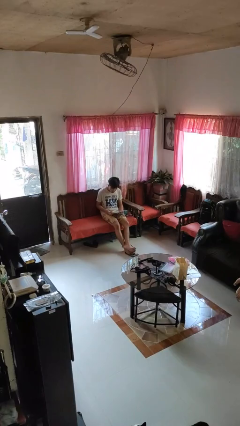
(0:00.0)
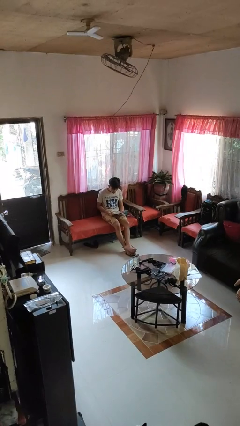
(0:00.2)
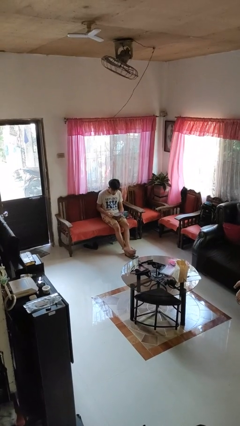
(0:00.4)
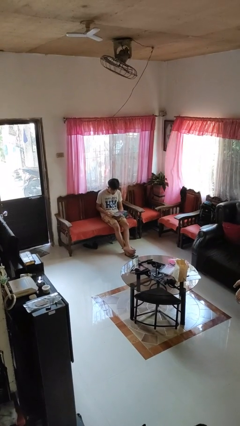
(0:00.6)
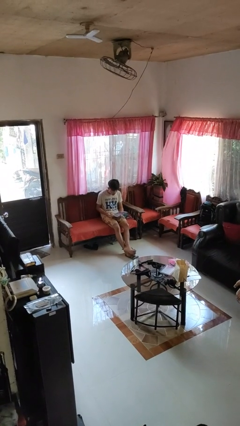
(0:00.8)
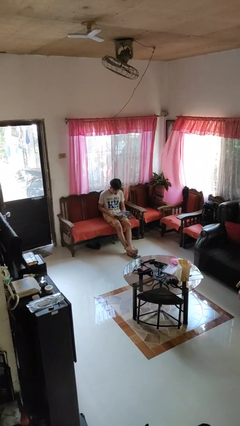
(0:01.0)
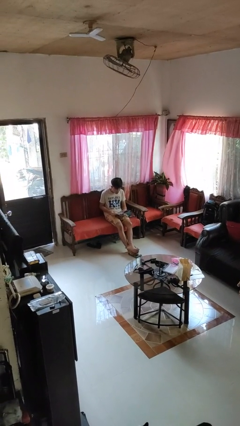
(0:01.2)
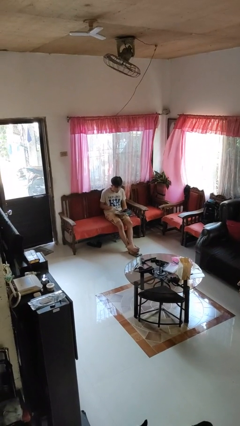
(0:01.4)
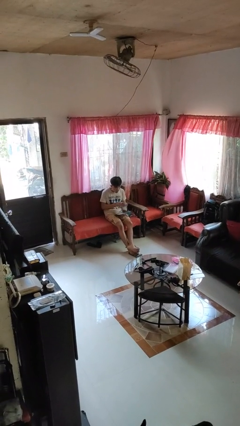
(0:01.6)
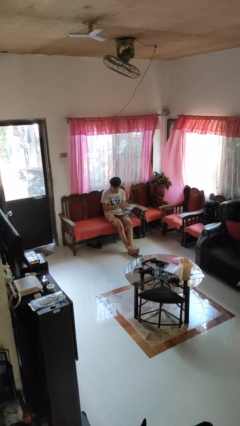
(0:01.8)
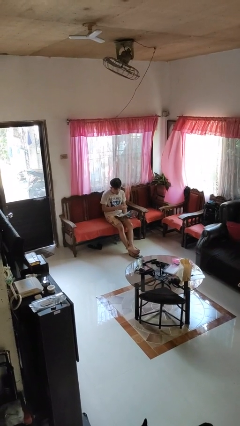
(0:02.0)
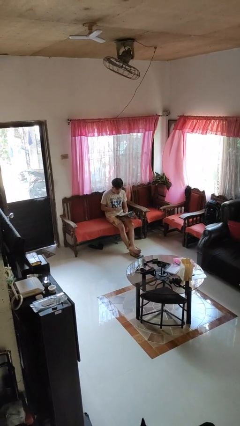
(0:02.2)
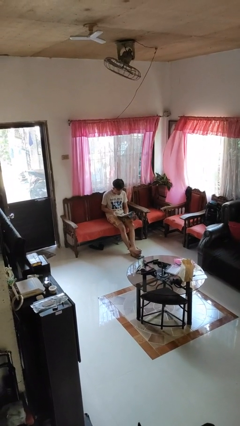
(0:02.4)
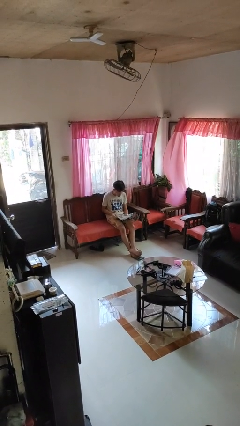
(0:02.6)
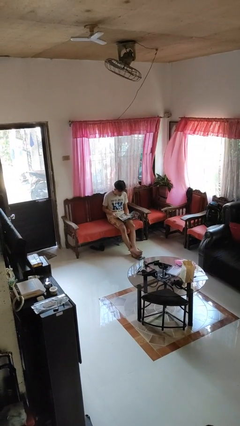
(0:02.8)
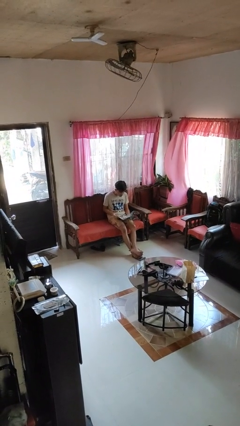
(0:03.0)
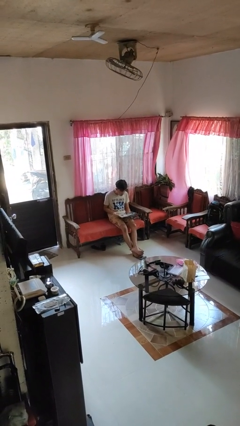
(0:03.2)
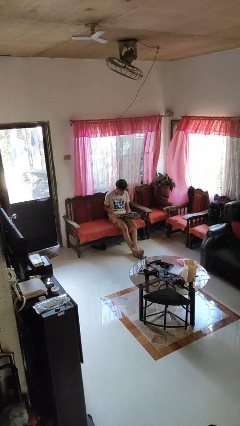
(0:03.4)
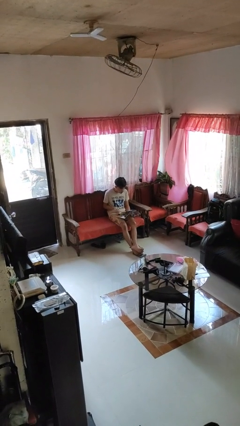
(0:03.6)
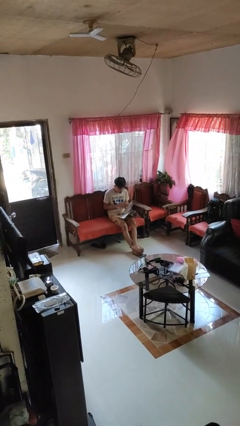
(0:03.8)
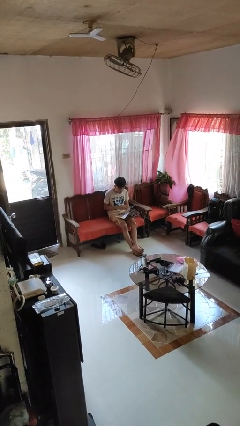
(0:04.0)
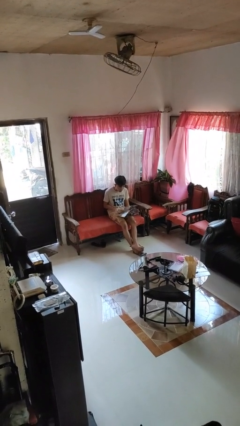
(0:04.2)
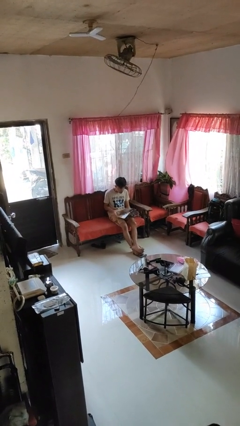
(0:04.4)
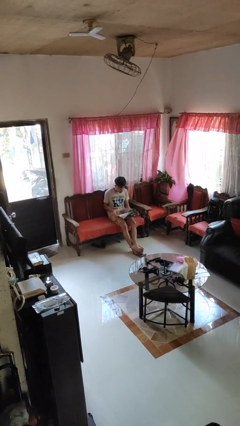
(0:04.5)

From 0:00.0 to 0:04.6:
person reads magazine

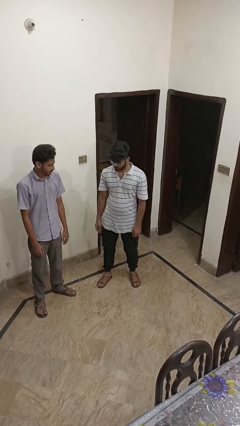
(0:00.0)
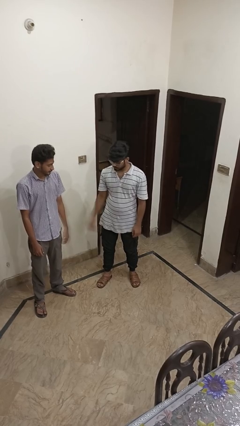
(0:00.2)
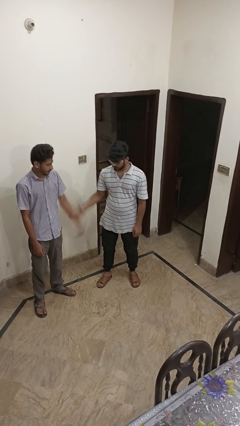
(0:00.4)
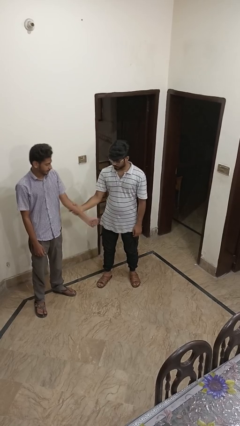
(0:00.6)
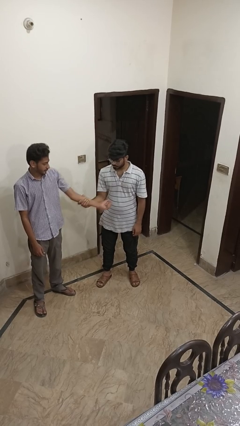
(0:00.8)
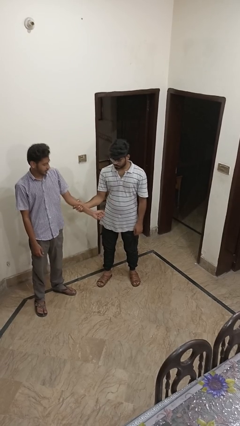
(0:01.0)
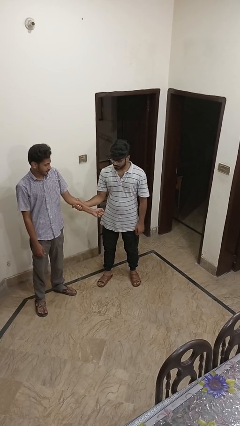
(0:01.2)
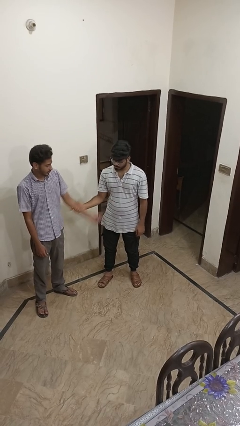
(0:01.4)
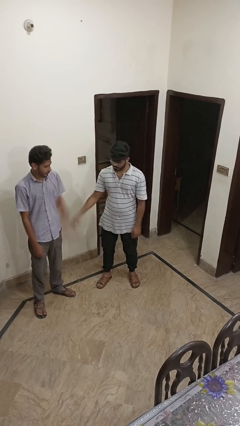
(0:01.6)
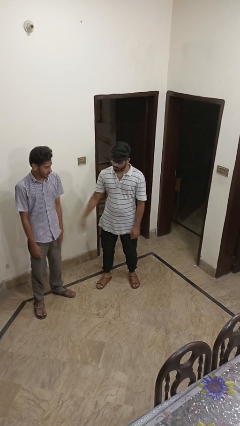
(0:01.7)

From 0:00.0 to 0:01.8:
person grabs person by forearm

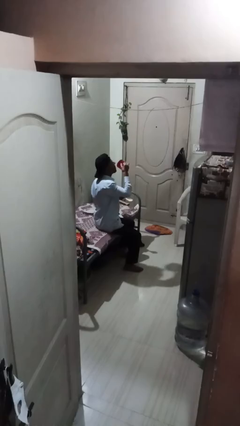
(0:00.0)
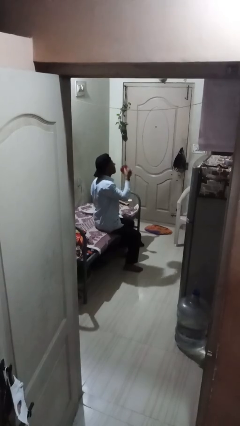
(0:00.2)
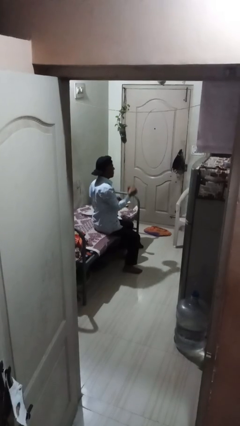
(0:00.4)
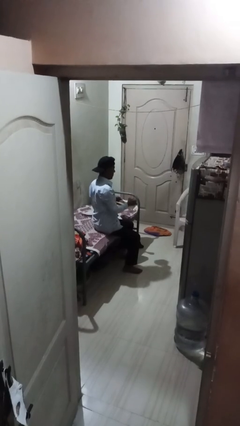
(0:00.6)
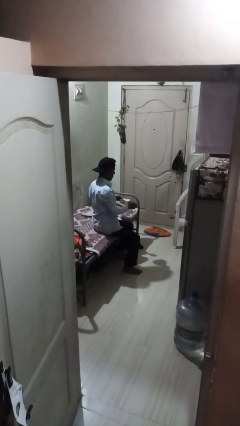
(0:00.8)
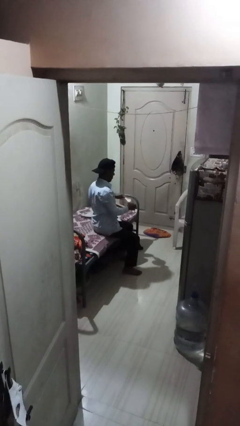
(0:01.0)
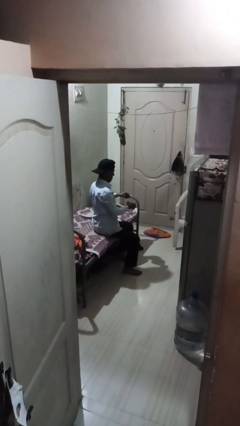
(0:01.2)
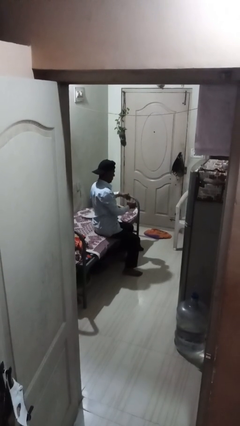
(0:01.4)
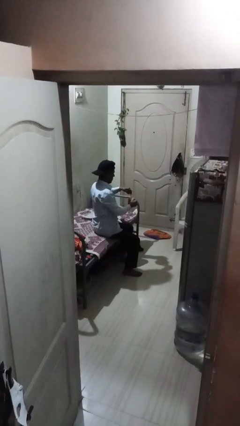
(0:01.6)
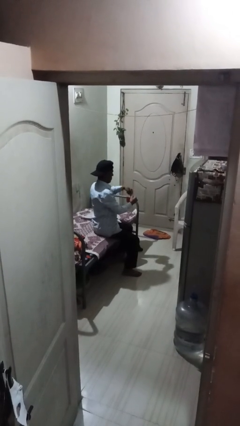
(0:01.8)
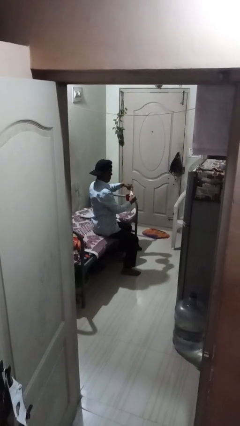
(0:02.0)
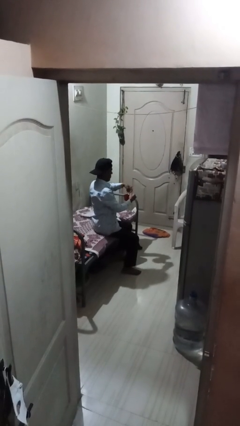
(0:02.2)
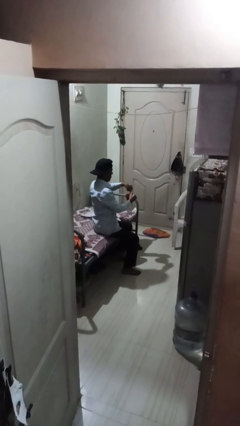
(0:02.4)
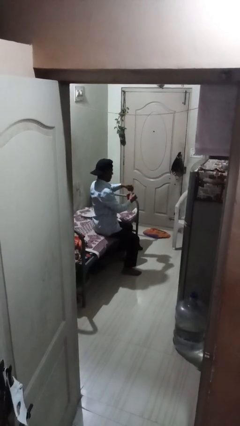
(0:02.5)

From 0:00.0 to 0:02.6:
person stirs mug

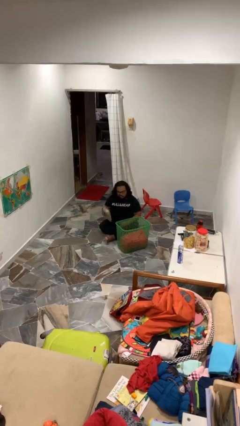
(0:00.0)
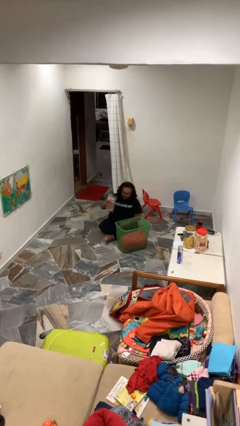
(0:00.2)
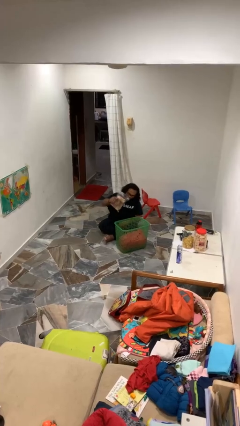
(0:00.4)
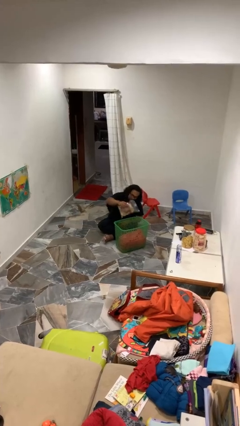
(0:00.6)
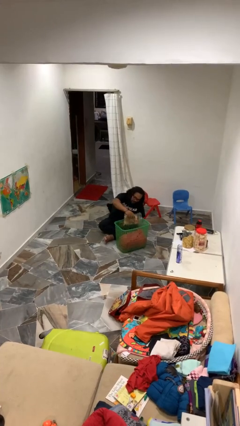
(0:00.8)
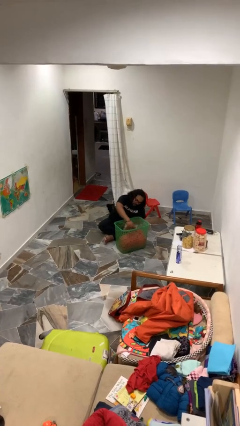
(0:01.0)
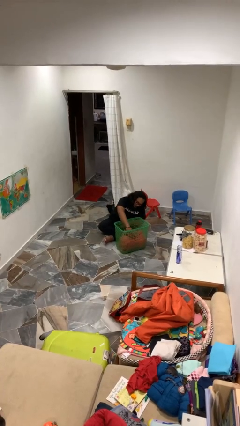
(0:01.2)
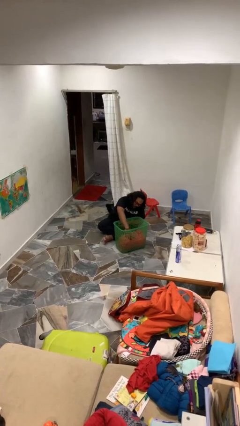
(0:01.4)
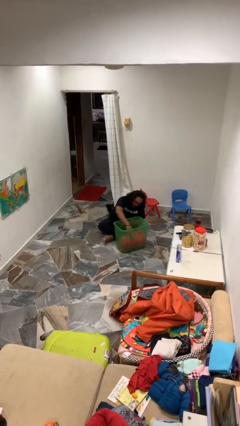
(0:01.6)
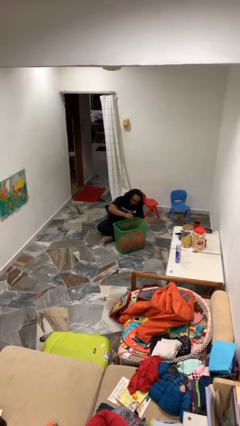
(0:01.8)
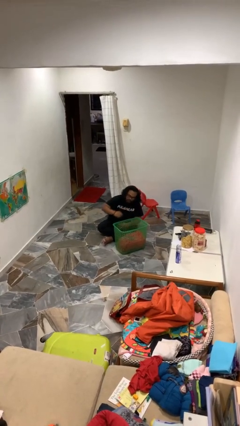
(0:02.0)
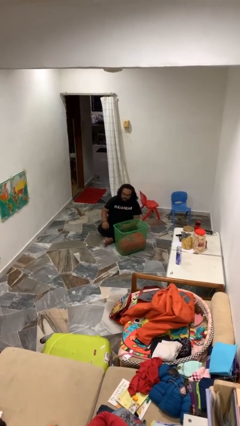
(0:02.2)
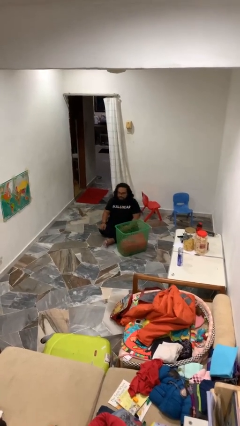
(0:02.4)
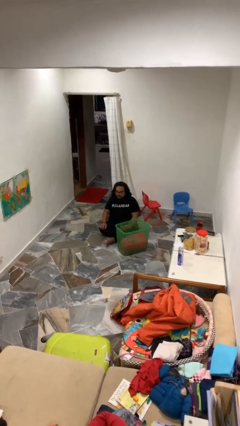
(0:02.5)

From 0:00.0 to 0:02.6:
person puts object into basket

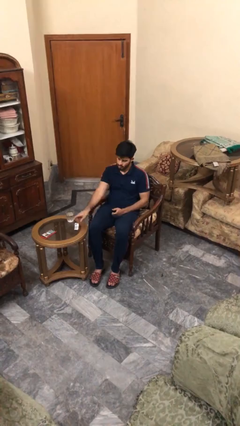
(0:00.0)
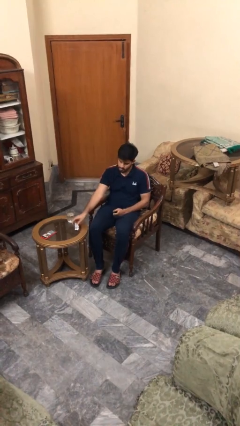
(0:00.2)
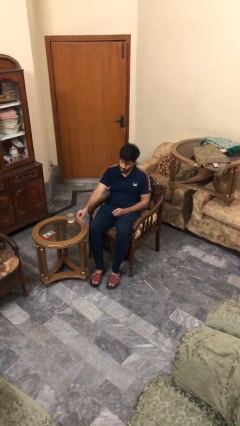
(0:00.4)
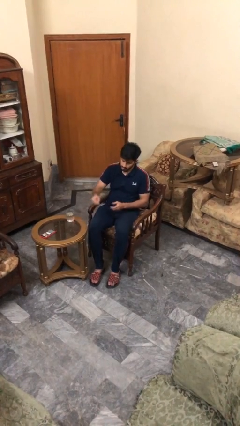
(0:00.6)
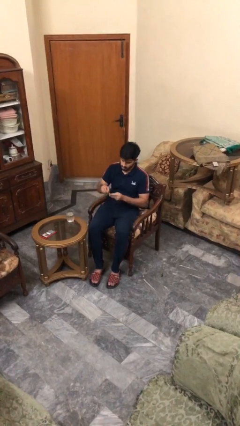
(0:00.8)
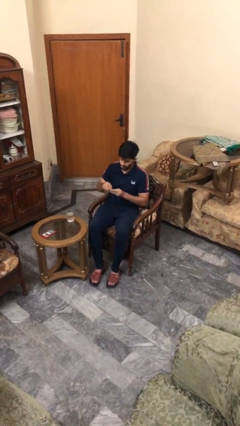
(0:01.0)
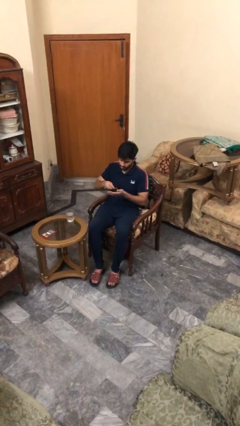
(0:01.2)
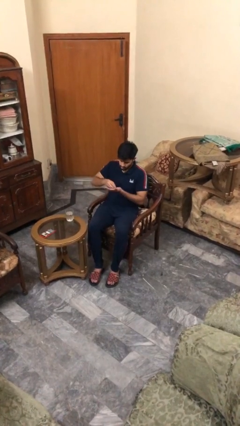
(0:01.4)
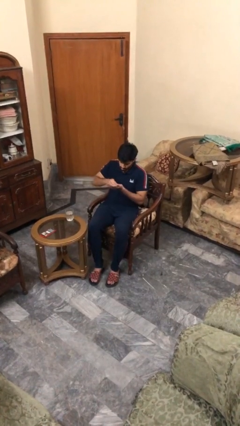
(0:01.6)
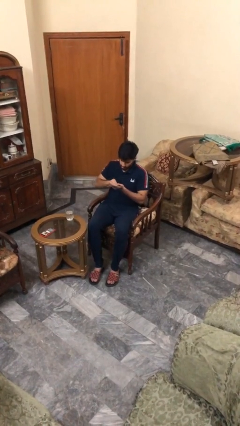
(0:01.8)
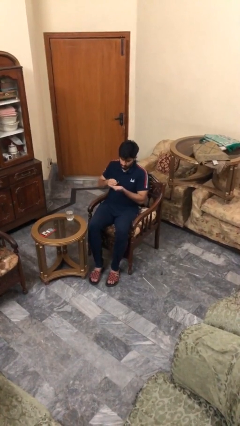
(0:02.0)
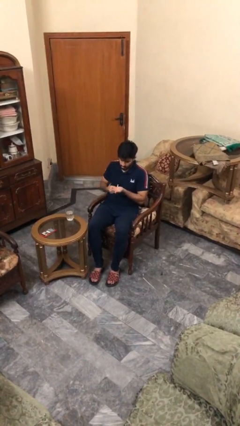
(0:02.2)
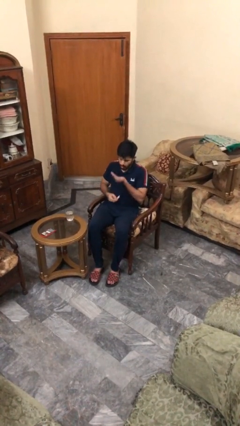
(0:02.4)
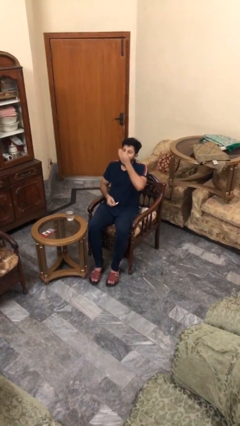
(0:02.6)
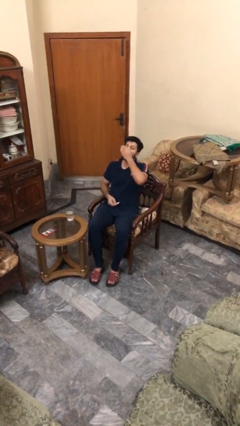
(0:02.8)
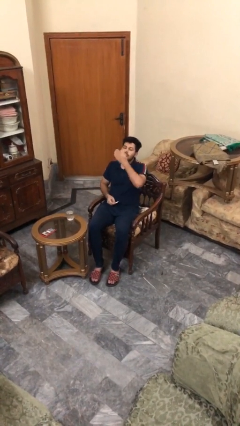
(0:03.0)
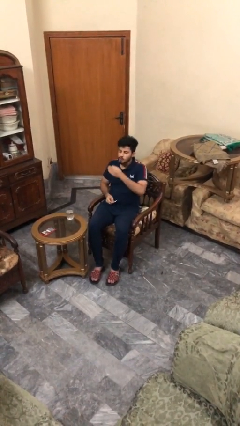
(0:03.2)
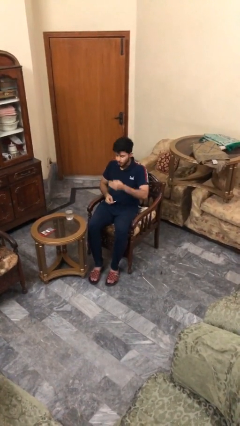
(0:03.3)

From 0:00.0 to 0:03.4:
person takes medicine pills

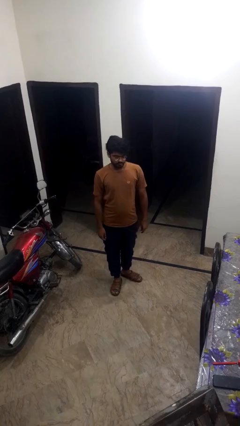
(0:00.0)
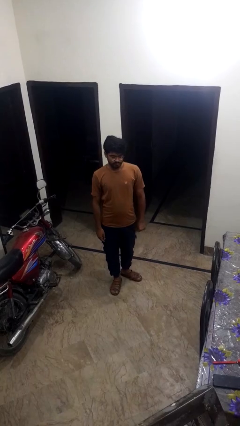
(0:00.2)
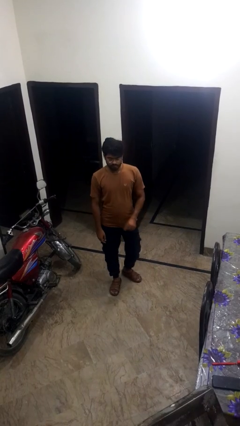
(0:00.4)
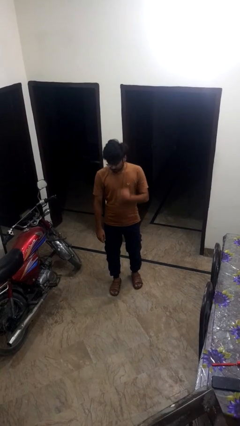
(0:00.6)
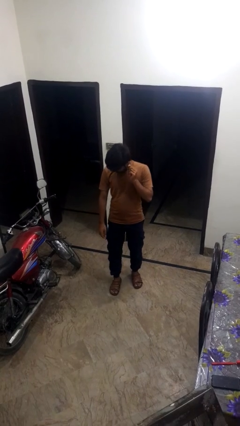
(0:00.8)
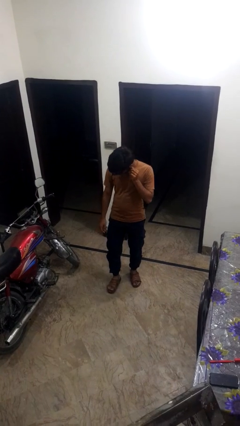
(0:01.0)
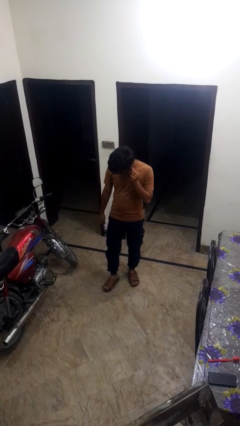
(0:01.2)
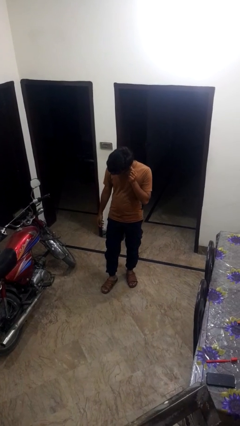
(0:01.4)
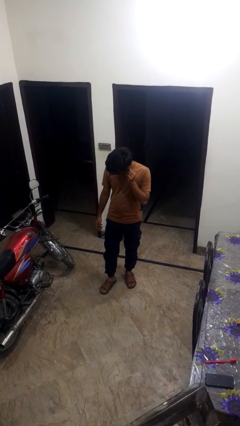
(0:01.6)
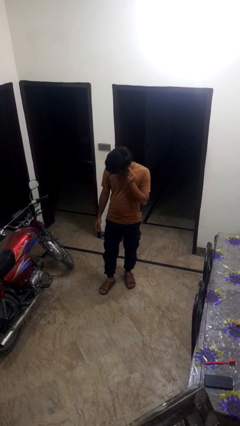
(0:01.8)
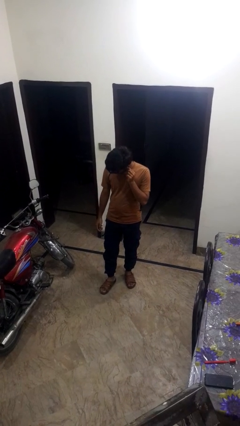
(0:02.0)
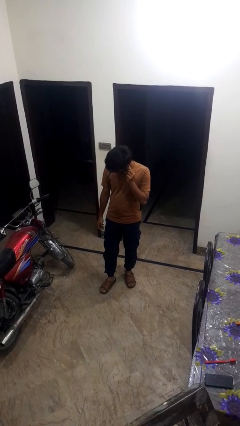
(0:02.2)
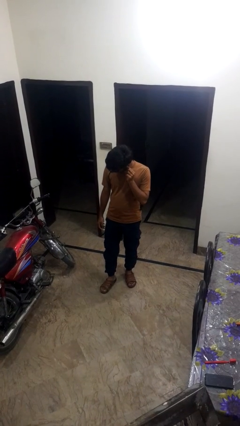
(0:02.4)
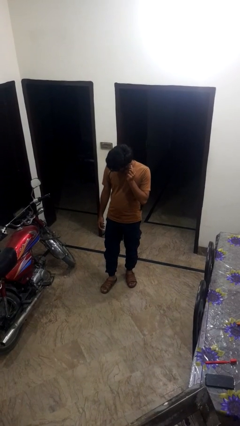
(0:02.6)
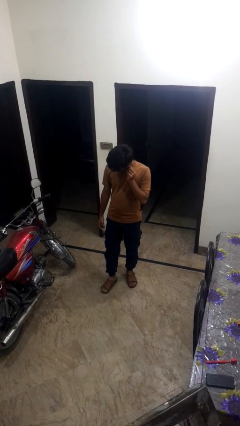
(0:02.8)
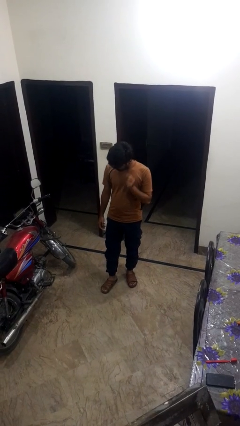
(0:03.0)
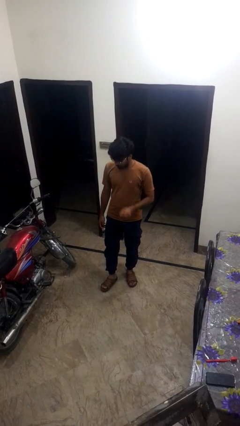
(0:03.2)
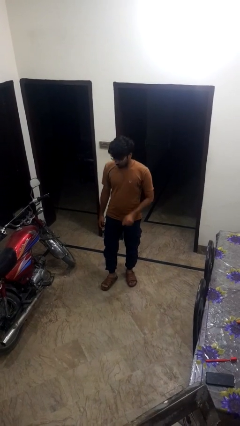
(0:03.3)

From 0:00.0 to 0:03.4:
person touches earlobe
